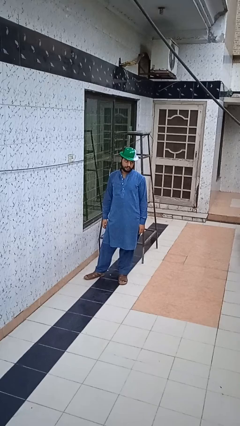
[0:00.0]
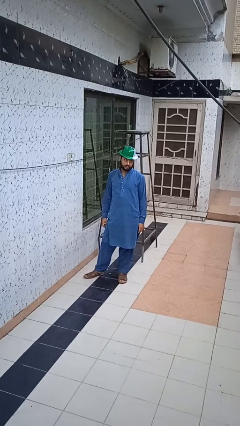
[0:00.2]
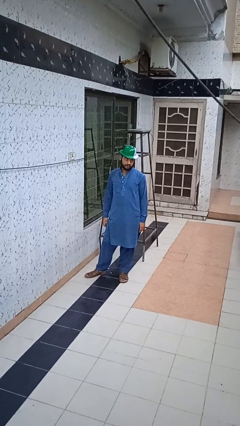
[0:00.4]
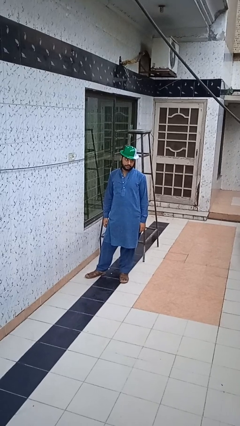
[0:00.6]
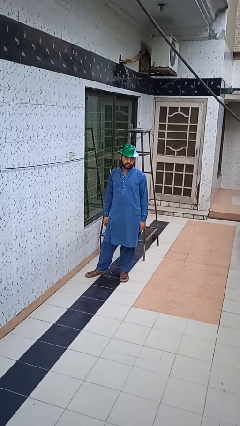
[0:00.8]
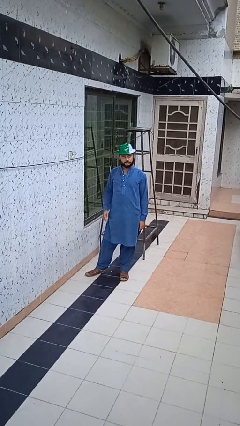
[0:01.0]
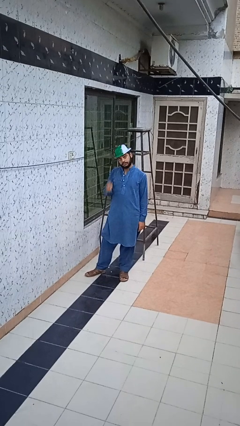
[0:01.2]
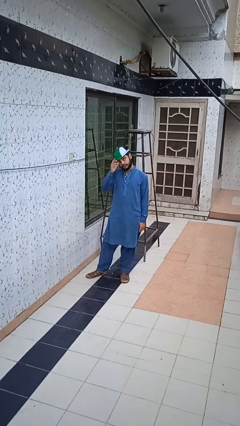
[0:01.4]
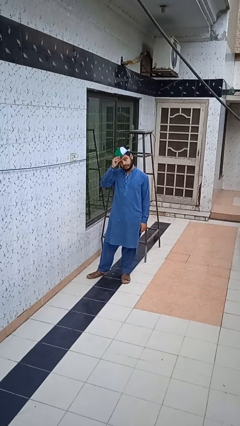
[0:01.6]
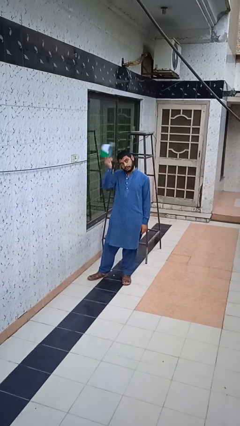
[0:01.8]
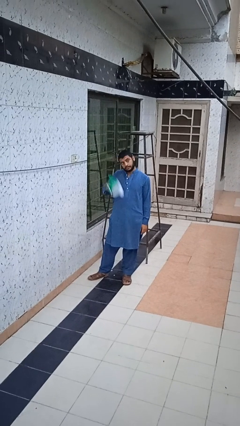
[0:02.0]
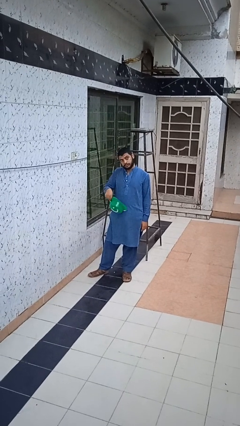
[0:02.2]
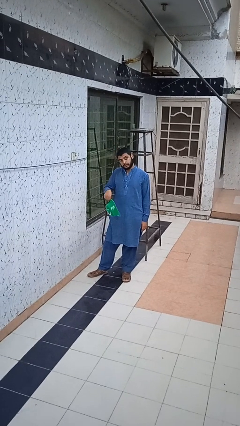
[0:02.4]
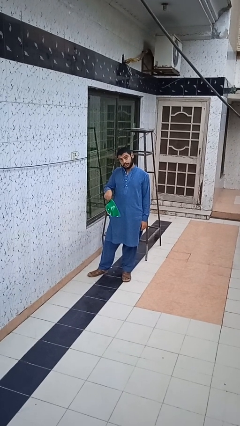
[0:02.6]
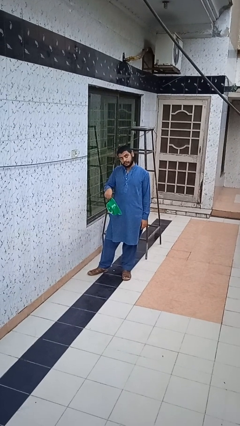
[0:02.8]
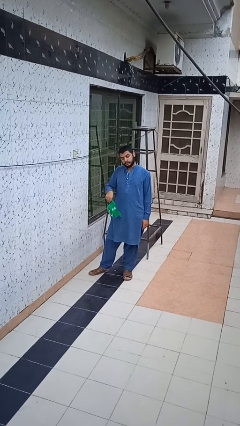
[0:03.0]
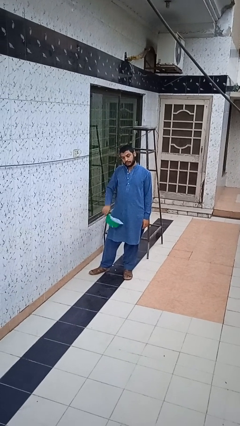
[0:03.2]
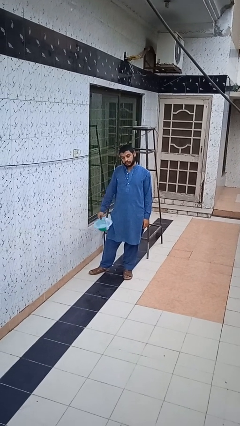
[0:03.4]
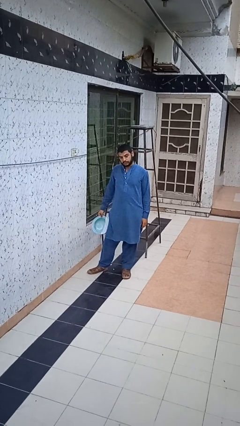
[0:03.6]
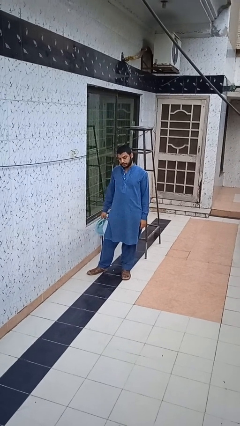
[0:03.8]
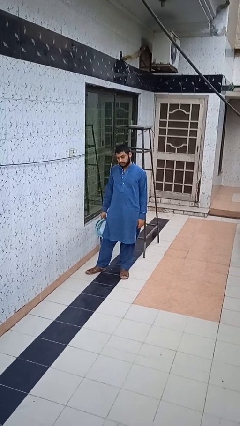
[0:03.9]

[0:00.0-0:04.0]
person takes off hat

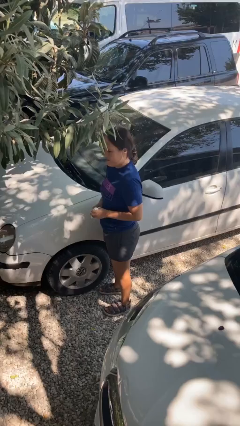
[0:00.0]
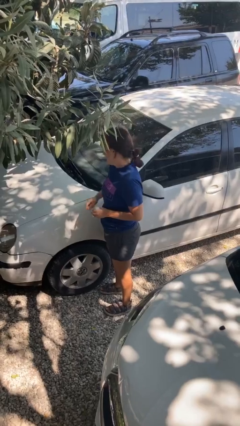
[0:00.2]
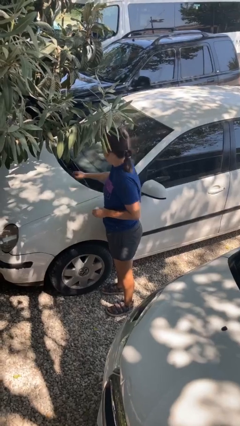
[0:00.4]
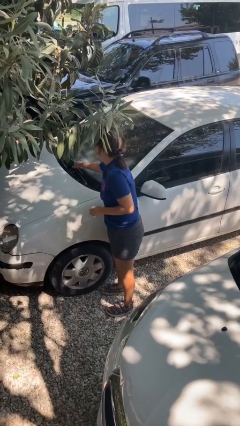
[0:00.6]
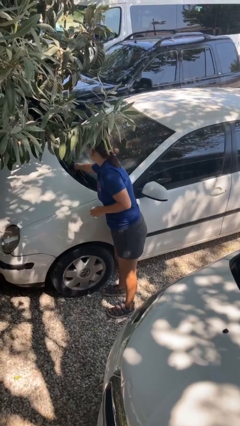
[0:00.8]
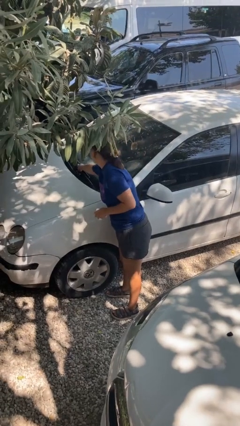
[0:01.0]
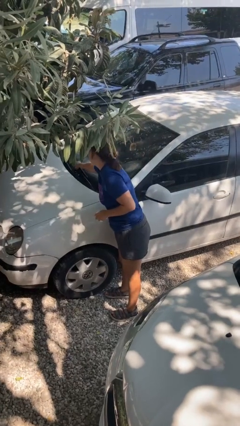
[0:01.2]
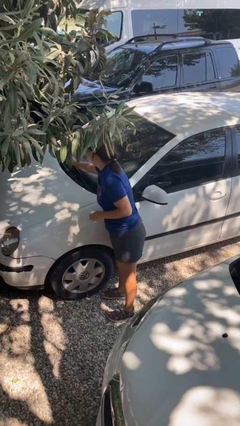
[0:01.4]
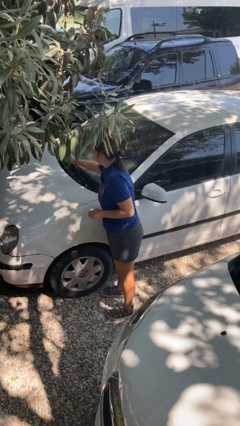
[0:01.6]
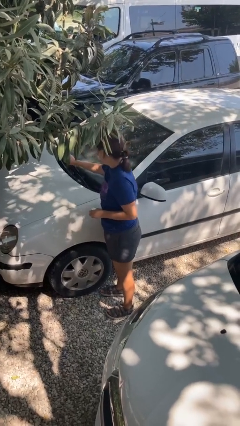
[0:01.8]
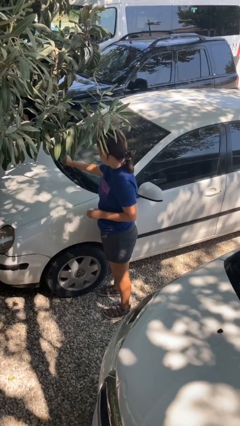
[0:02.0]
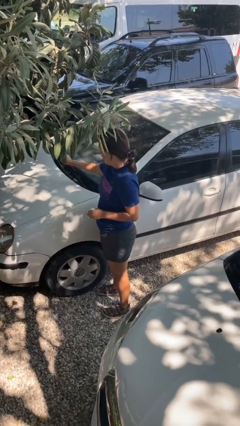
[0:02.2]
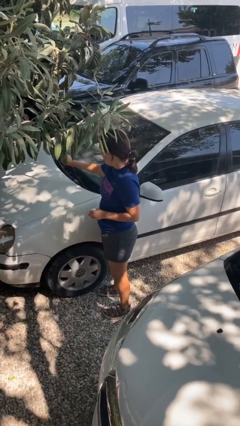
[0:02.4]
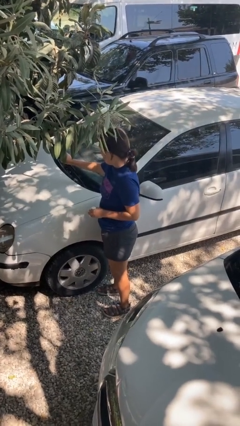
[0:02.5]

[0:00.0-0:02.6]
person flips up car wipers

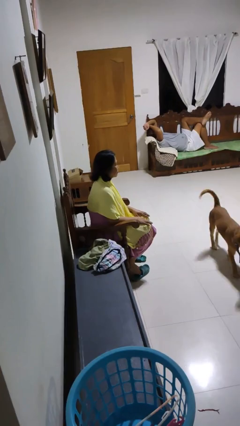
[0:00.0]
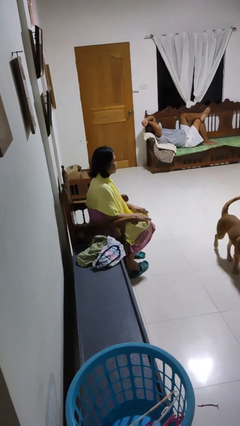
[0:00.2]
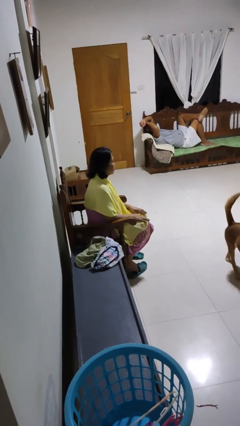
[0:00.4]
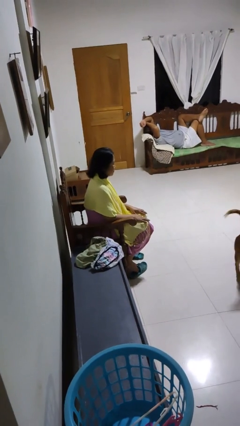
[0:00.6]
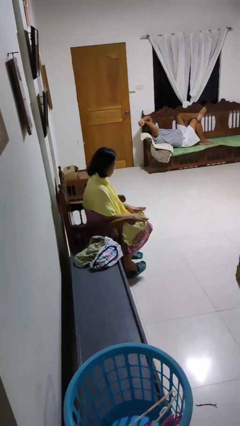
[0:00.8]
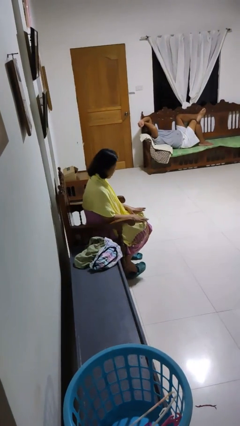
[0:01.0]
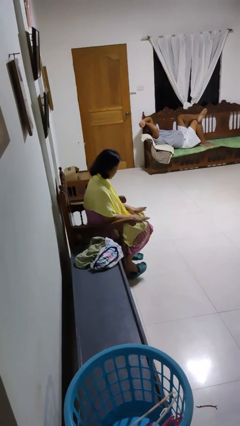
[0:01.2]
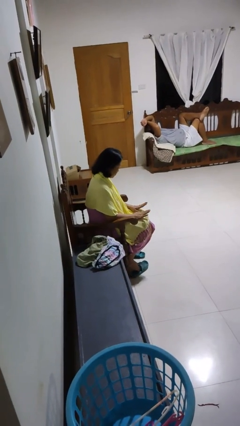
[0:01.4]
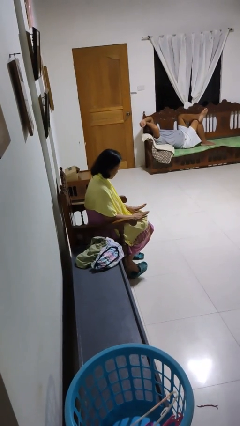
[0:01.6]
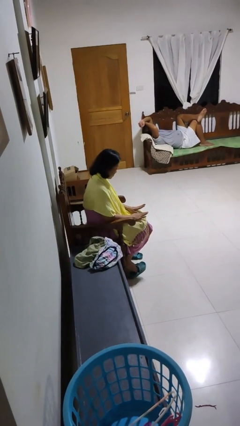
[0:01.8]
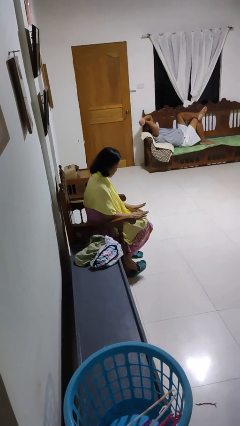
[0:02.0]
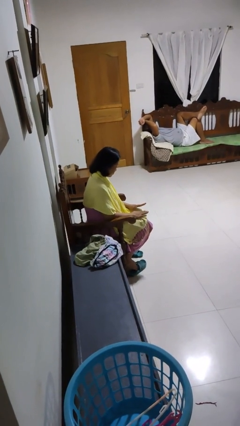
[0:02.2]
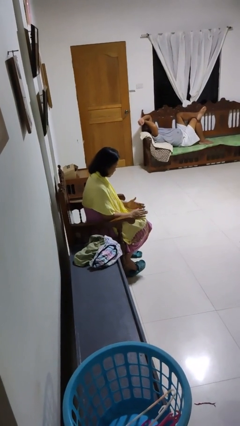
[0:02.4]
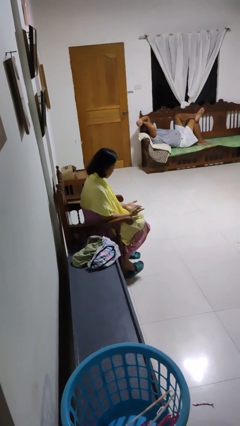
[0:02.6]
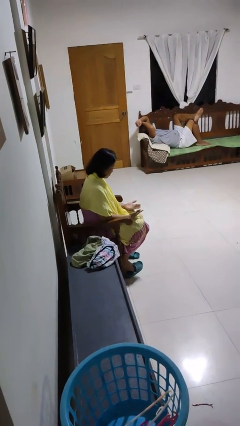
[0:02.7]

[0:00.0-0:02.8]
person looks at hands in lap

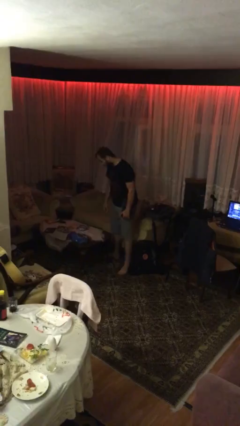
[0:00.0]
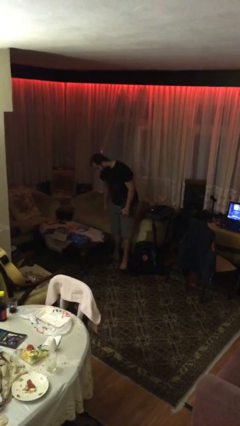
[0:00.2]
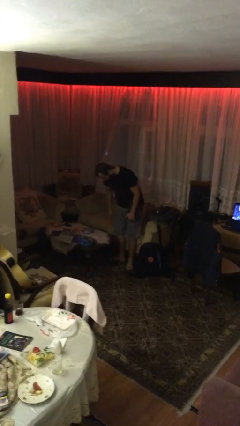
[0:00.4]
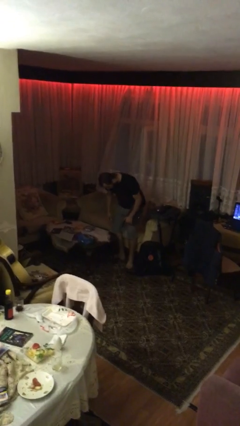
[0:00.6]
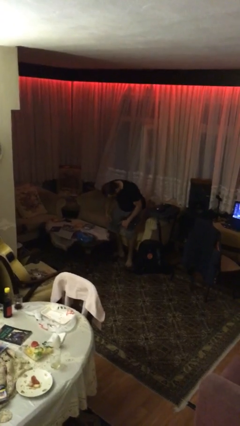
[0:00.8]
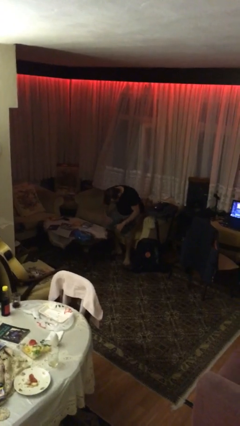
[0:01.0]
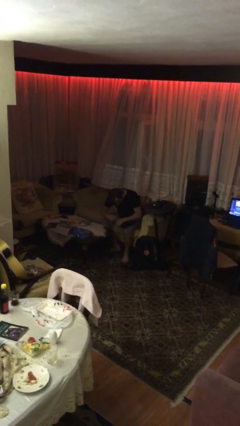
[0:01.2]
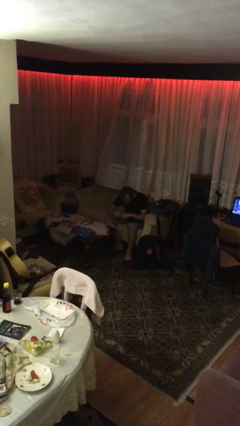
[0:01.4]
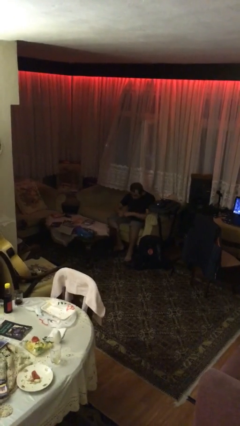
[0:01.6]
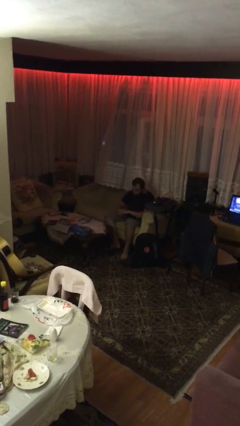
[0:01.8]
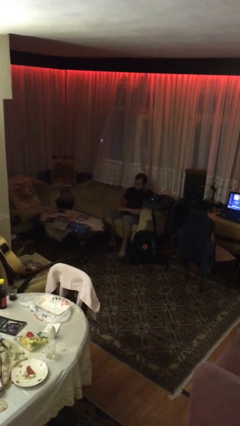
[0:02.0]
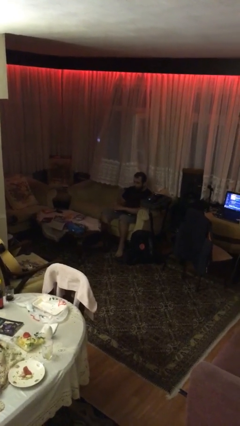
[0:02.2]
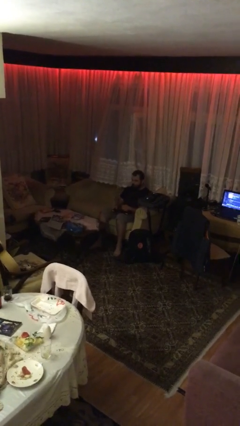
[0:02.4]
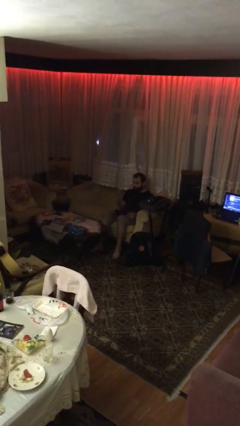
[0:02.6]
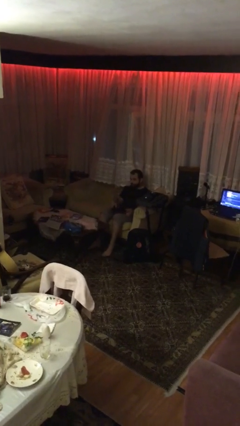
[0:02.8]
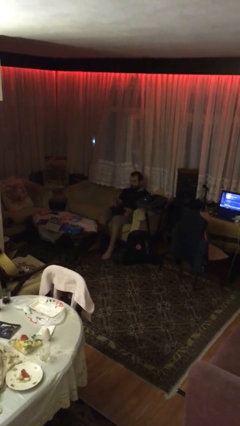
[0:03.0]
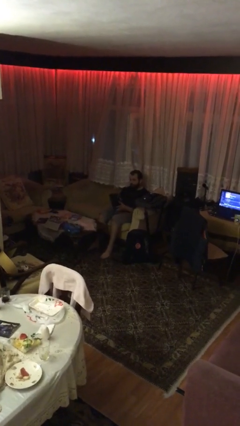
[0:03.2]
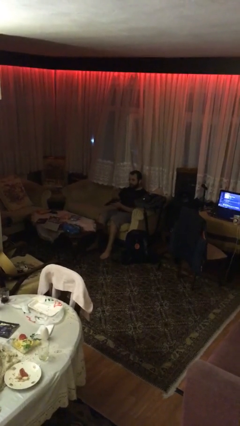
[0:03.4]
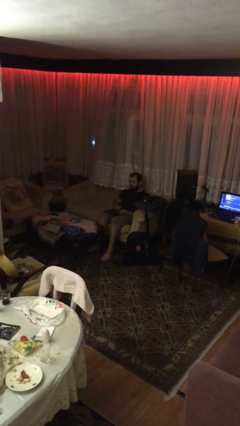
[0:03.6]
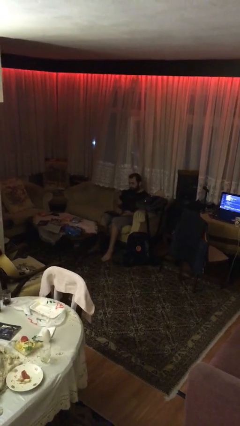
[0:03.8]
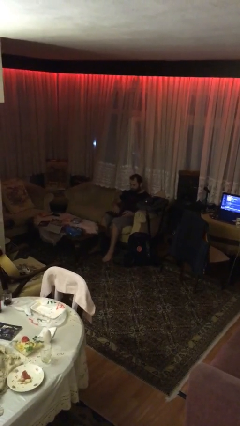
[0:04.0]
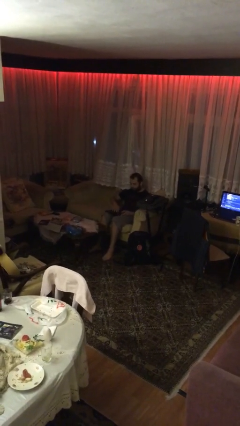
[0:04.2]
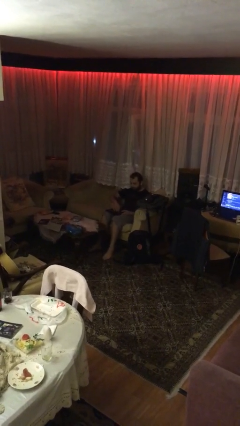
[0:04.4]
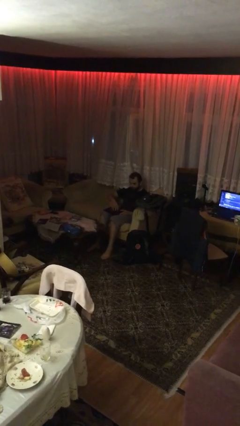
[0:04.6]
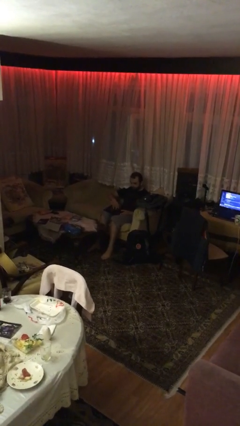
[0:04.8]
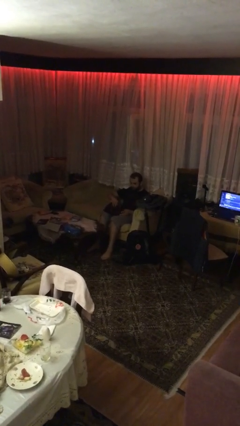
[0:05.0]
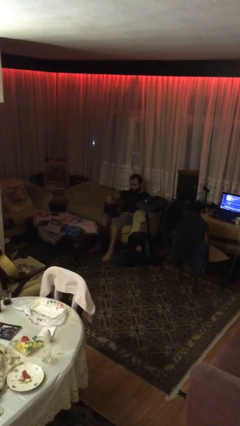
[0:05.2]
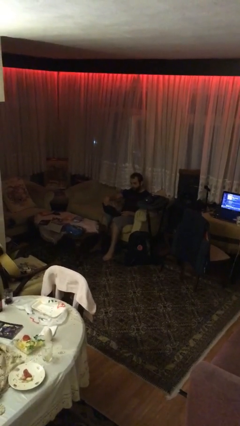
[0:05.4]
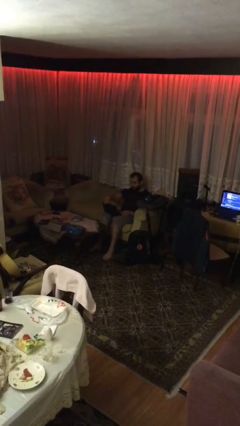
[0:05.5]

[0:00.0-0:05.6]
person sits down

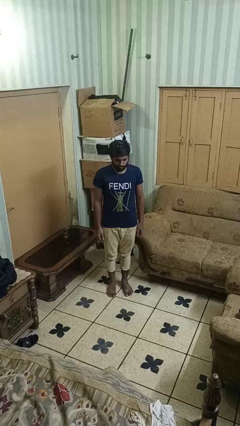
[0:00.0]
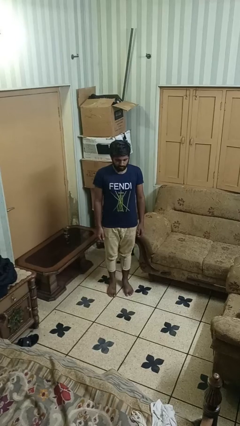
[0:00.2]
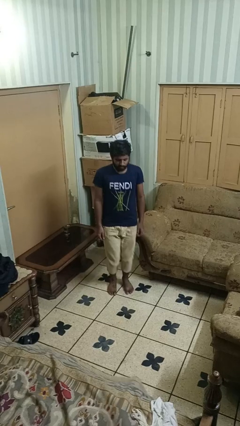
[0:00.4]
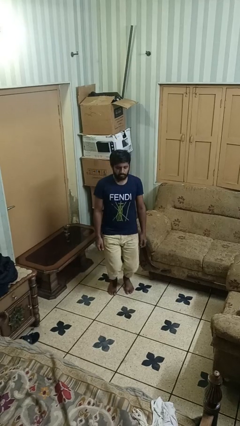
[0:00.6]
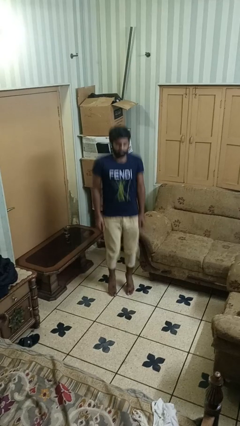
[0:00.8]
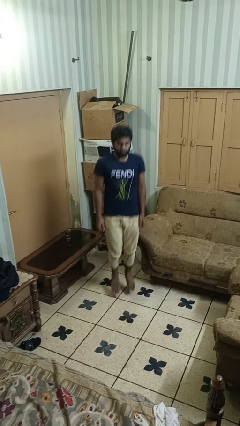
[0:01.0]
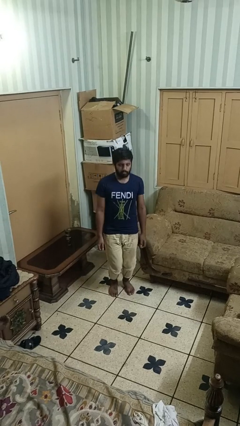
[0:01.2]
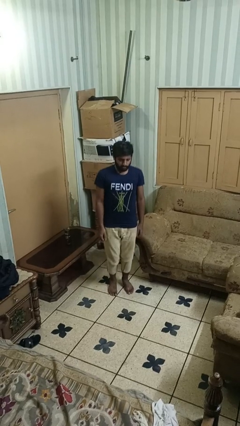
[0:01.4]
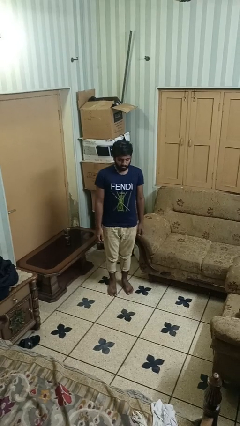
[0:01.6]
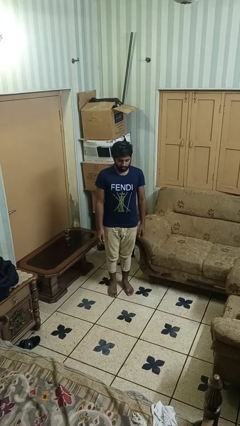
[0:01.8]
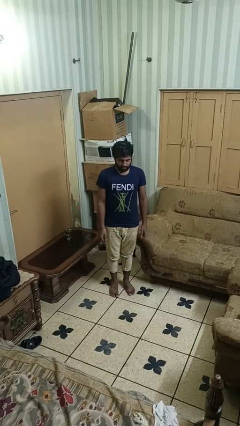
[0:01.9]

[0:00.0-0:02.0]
person jumps

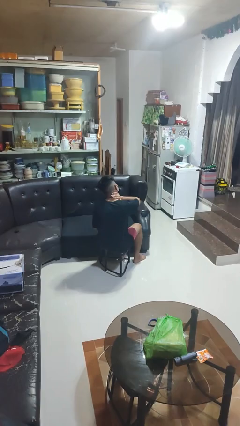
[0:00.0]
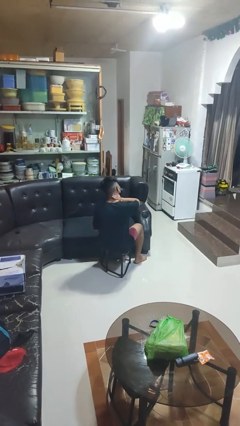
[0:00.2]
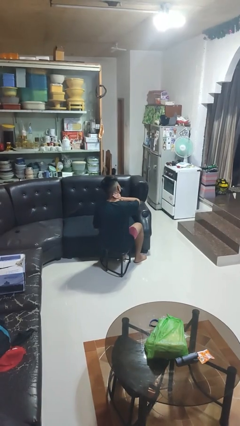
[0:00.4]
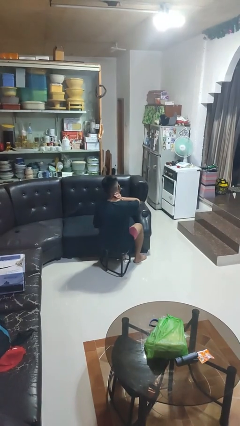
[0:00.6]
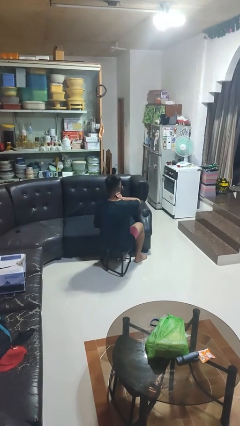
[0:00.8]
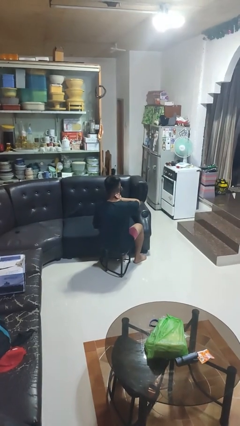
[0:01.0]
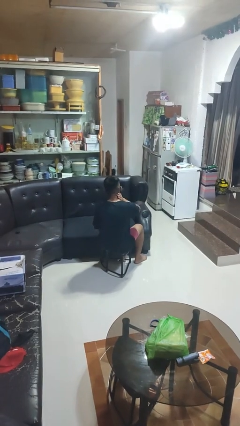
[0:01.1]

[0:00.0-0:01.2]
person swats bug
